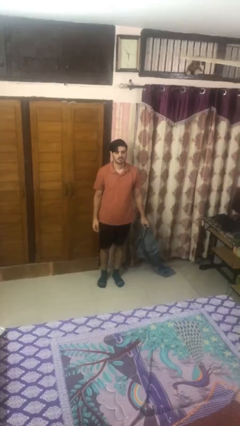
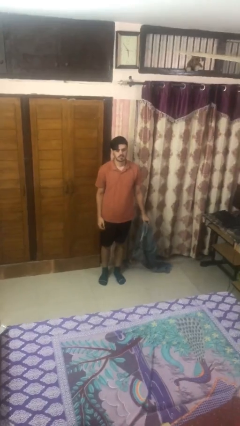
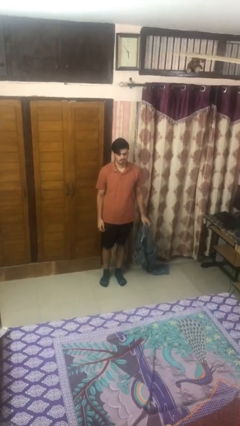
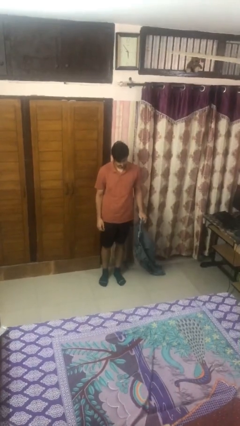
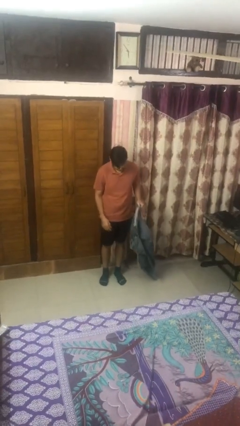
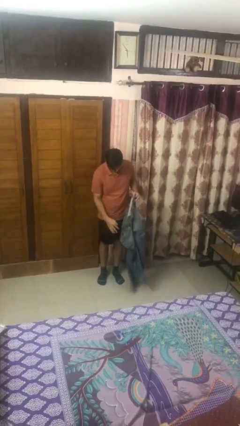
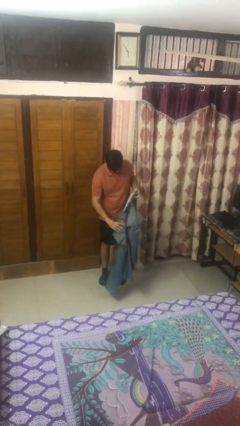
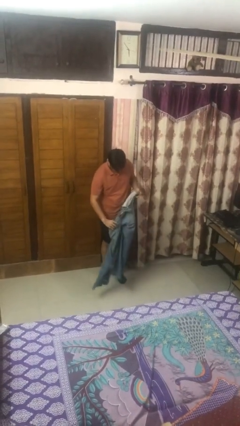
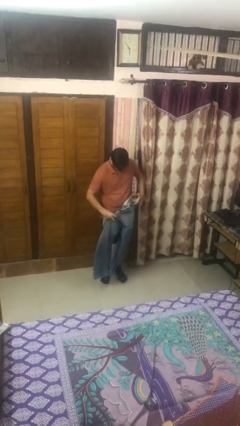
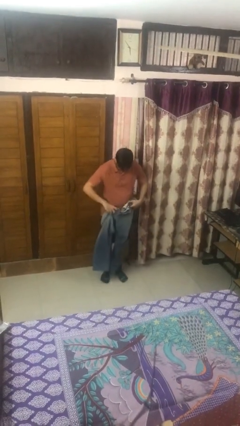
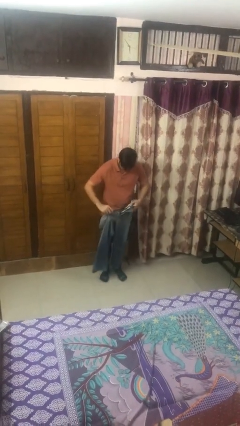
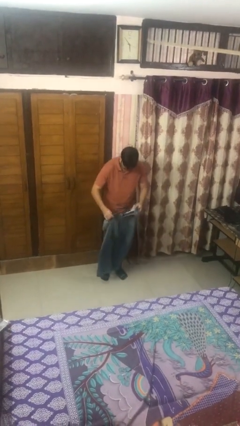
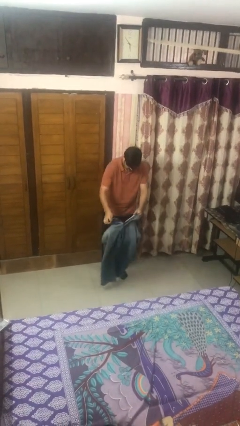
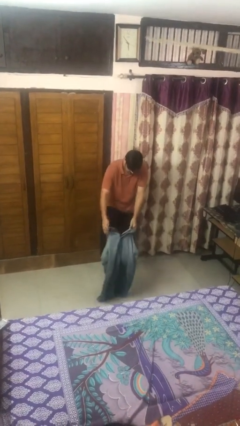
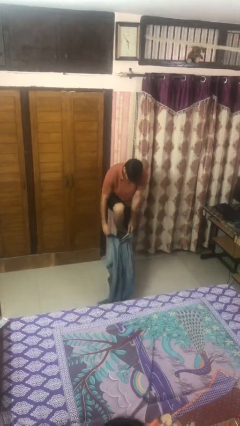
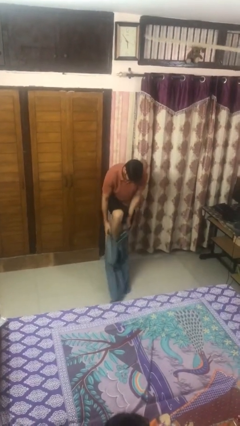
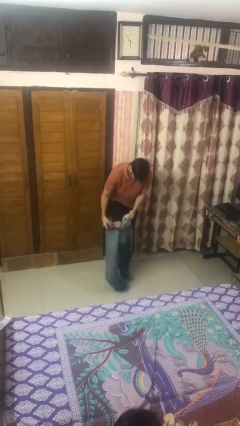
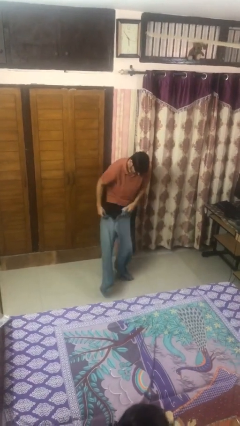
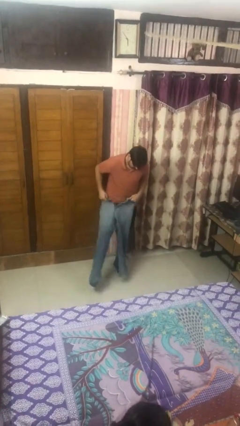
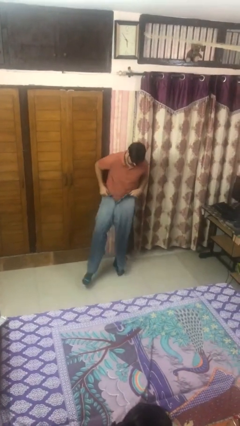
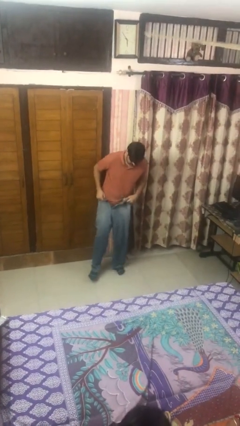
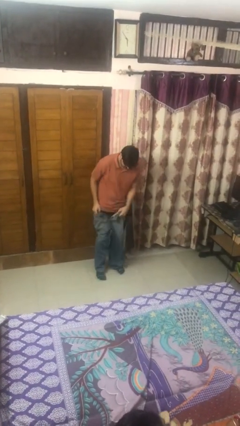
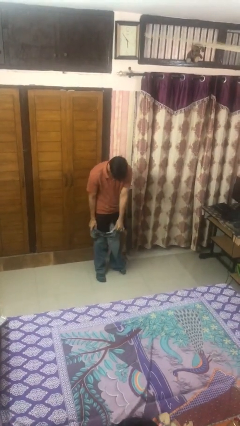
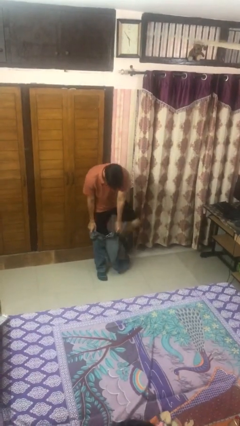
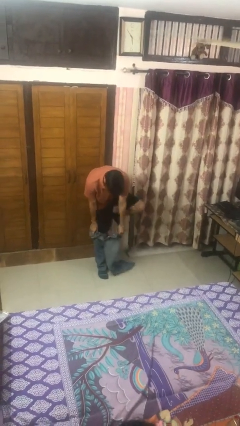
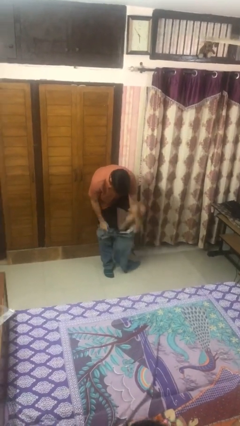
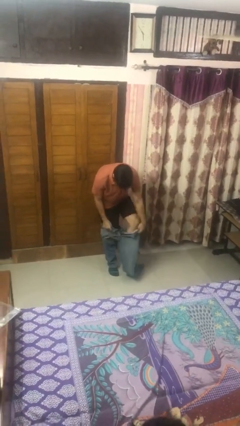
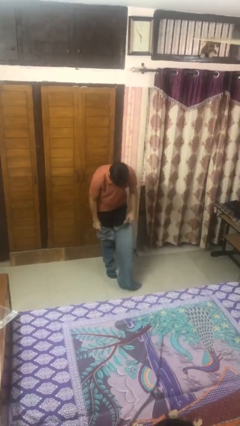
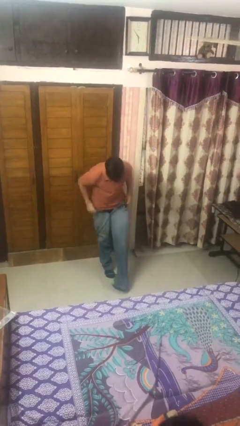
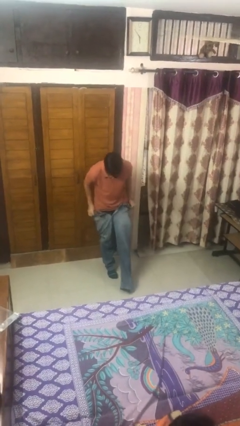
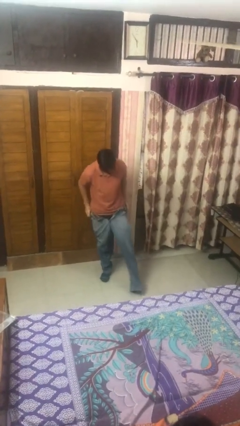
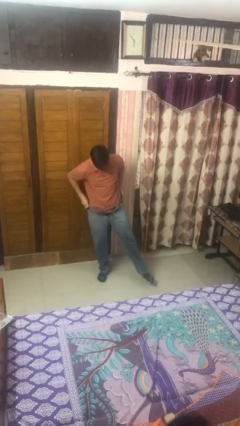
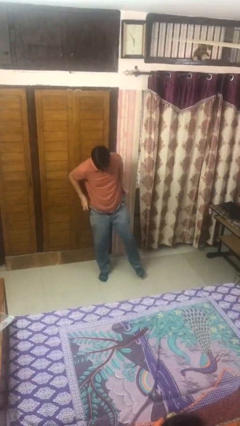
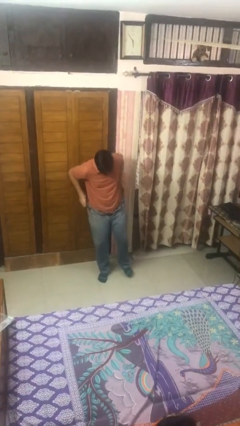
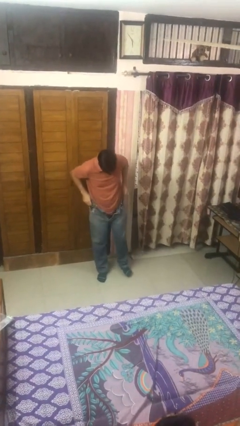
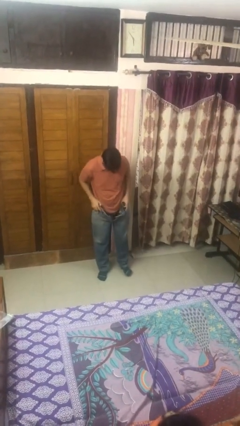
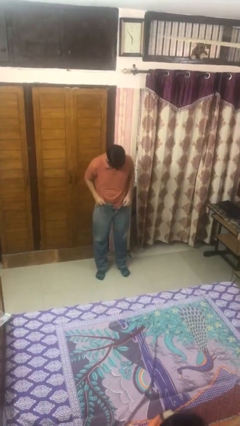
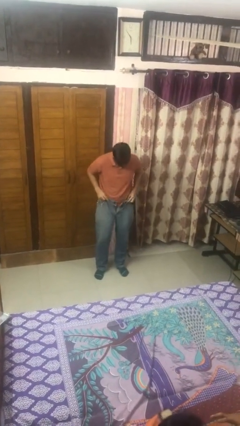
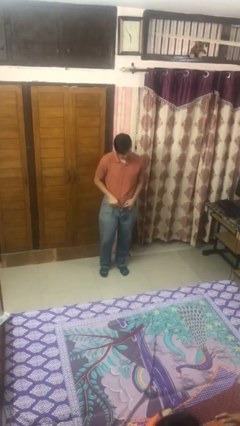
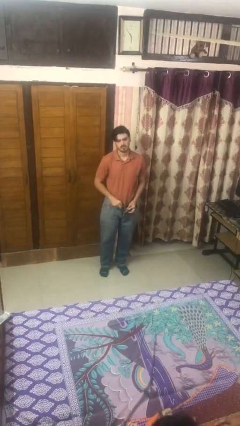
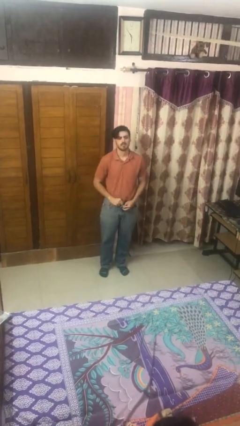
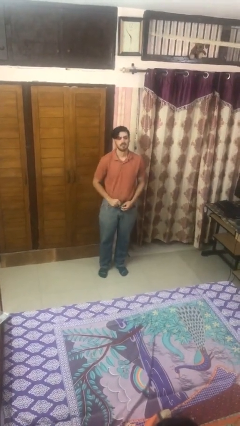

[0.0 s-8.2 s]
person puts on pants

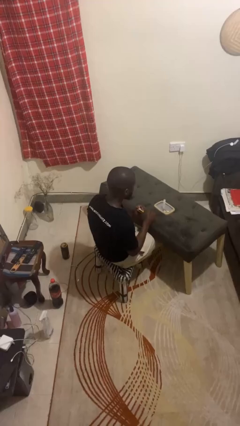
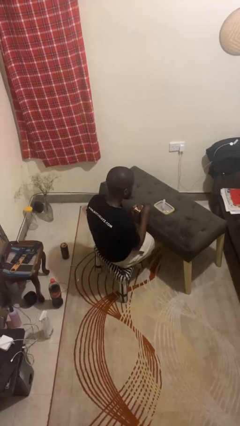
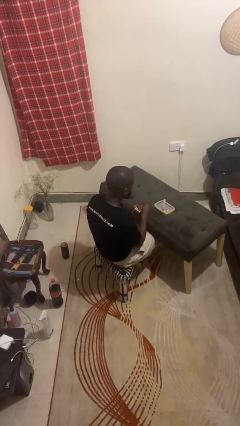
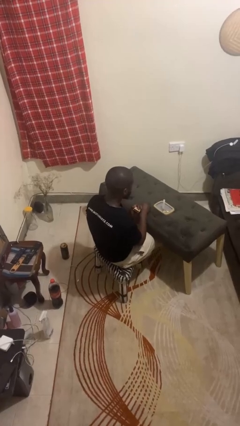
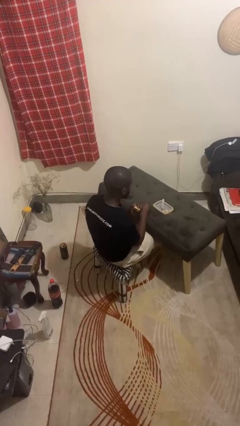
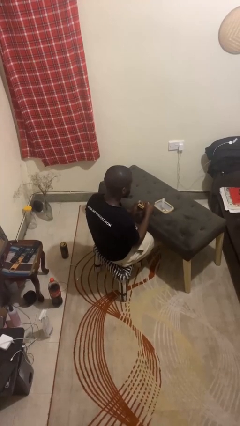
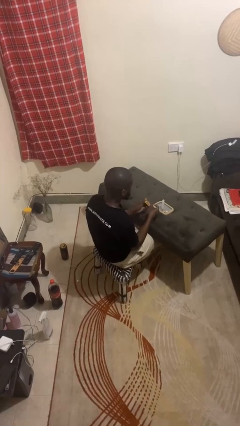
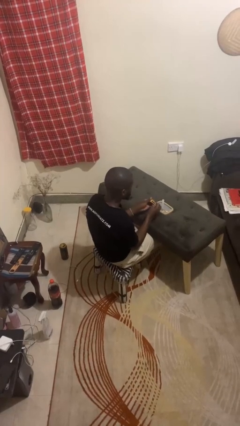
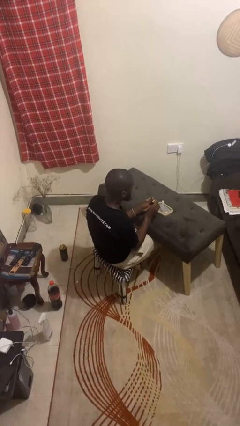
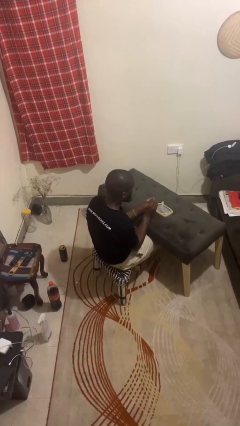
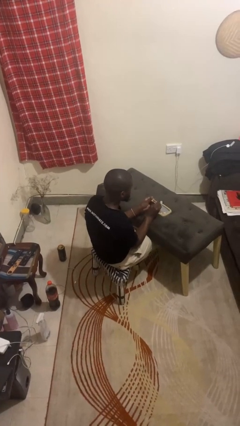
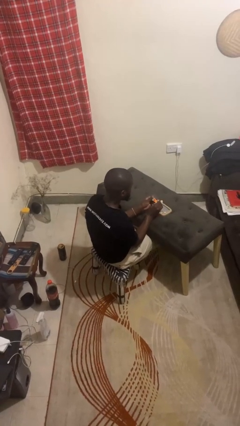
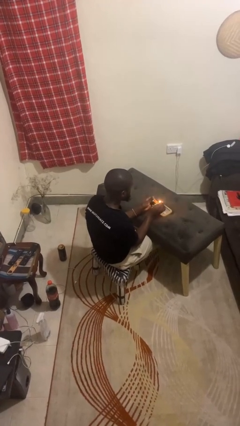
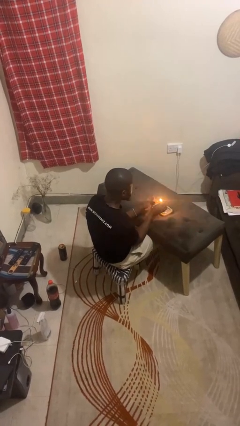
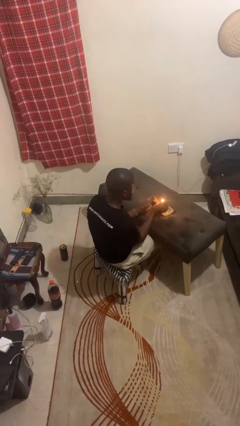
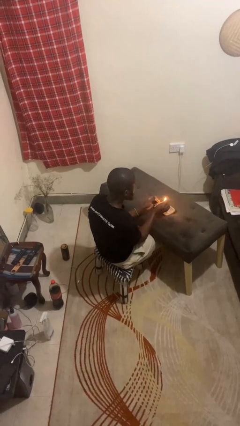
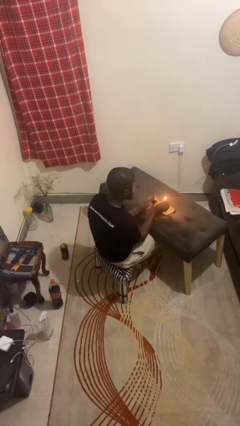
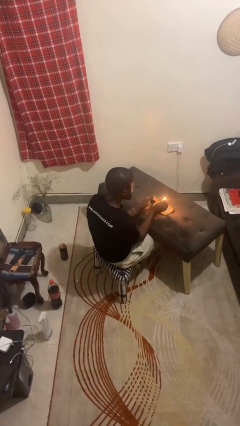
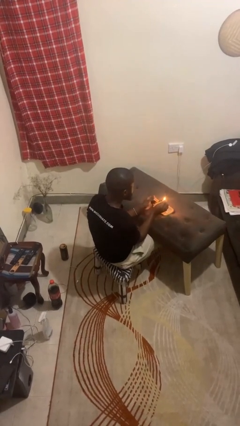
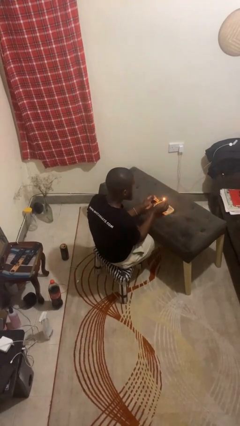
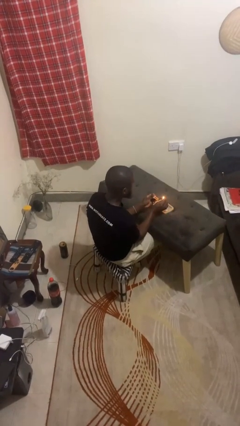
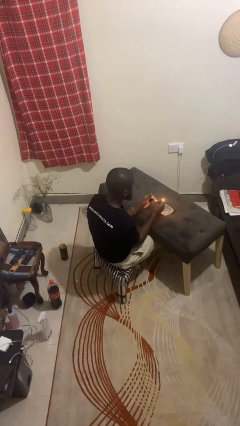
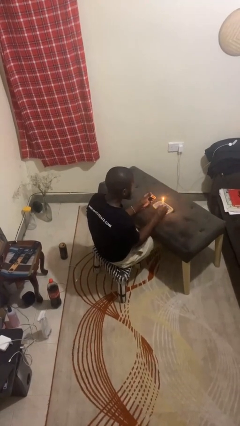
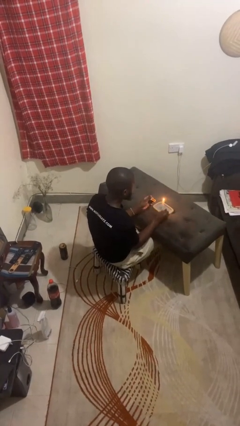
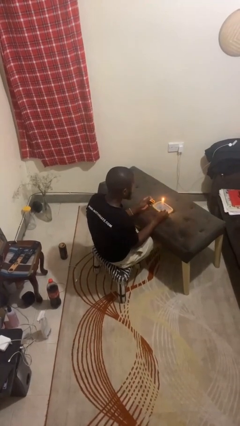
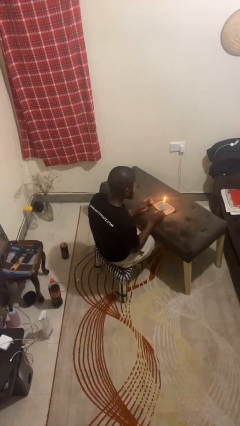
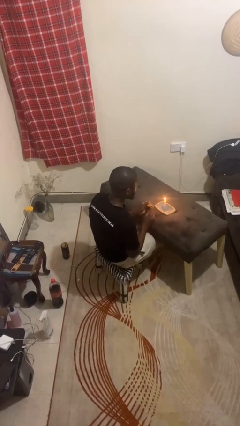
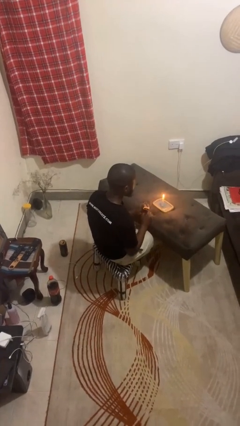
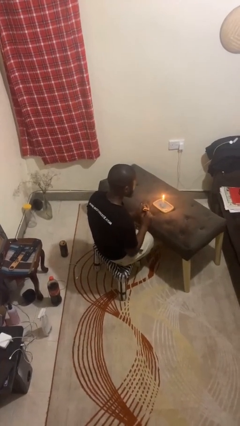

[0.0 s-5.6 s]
person lights candle

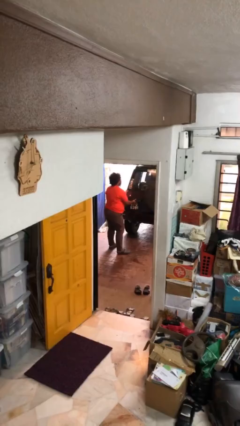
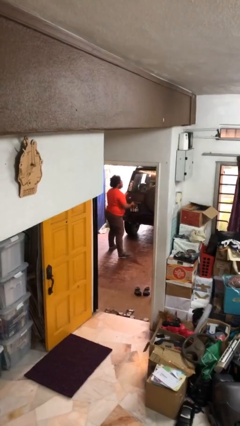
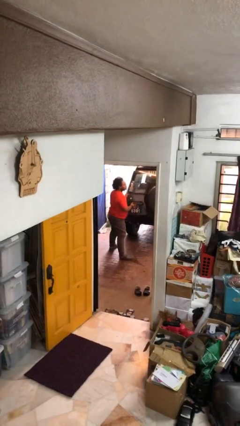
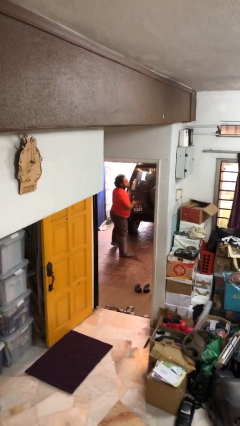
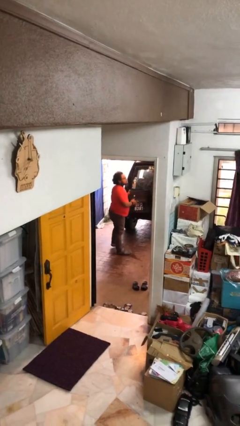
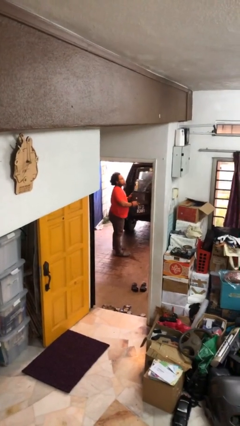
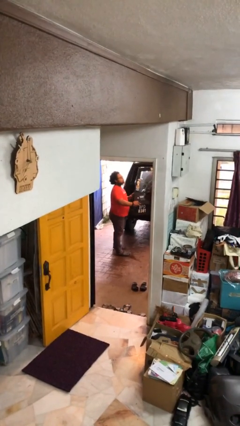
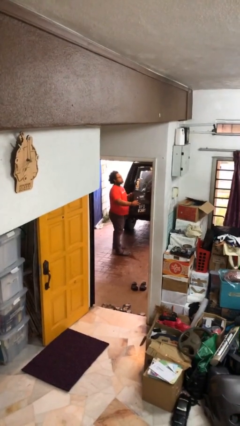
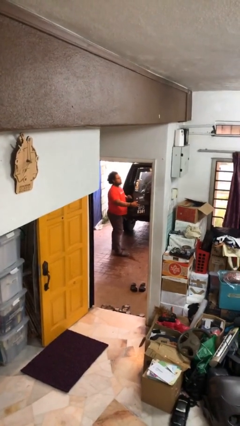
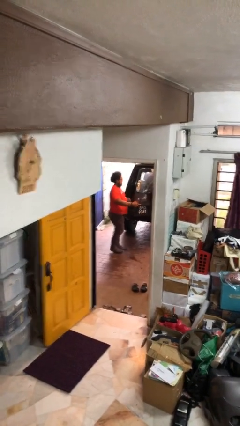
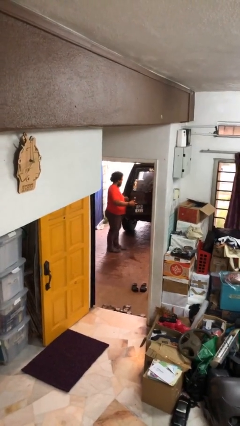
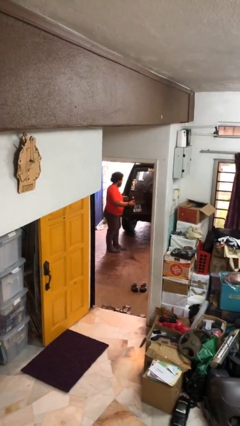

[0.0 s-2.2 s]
person opens car trunk

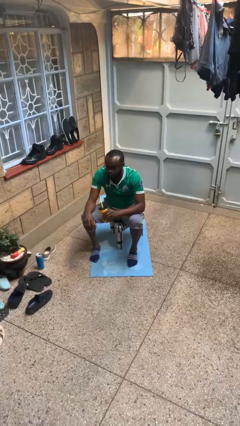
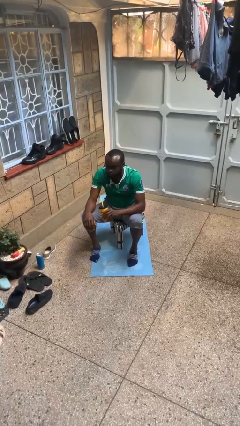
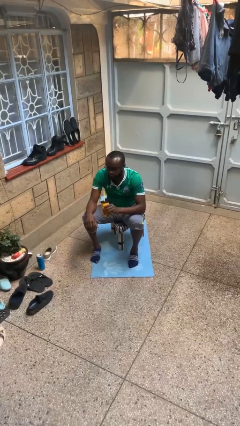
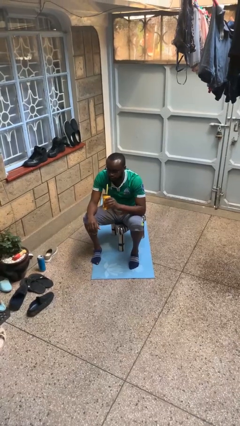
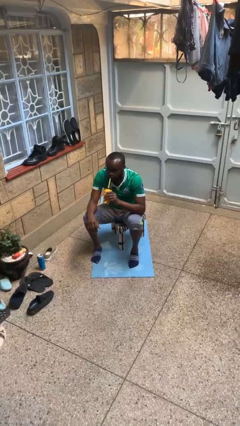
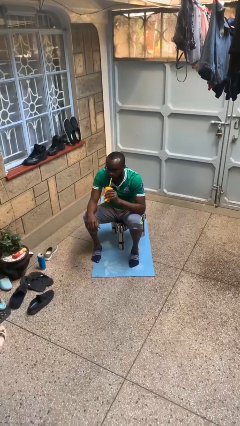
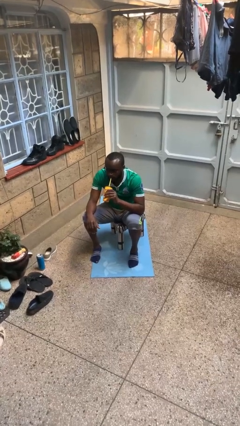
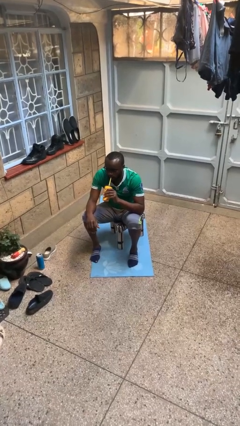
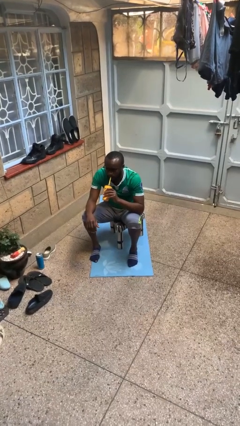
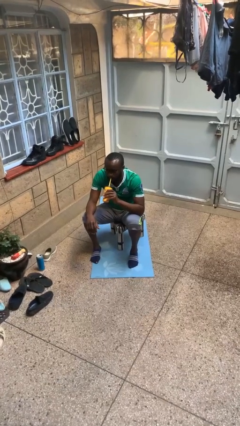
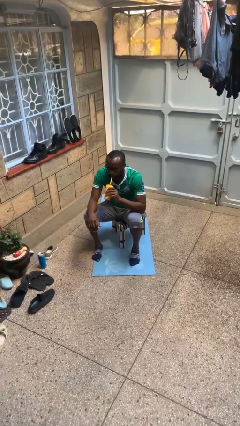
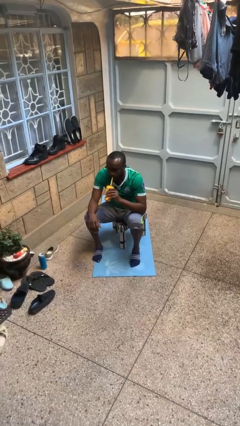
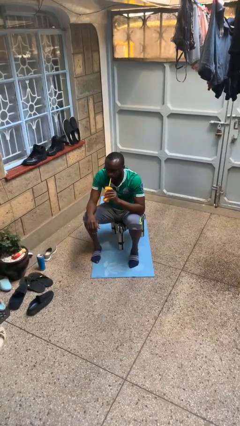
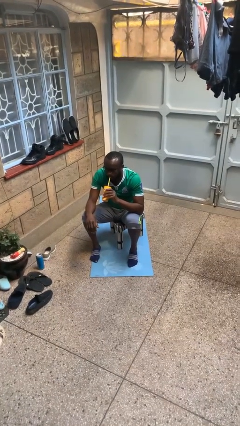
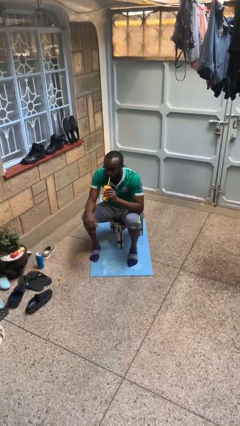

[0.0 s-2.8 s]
person drinks from straw
